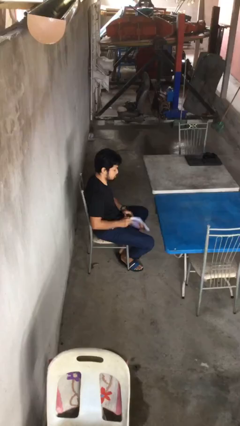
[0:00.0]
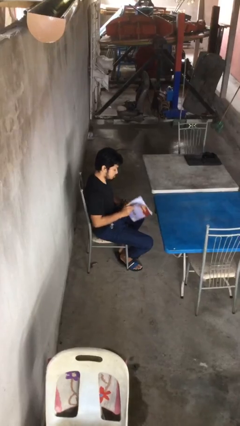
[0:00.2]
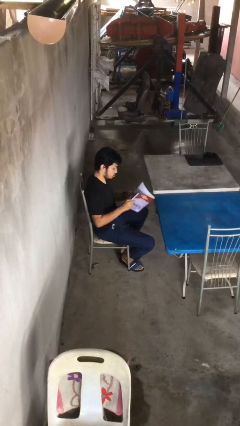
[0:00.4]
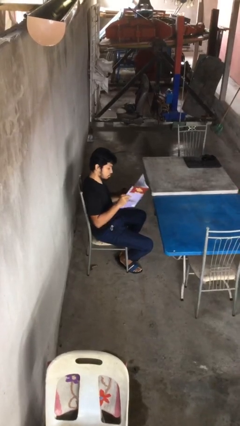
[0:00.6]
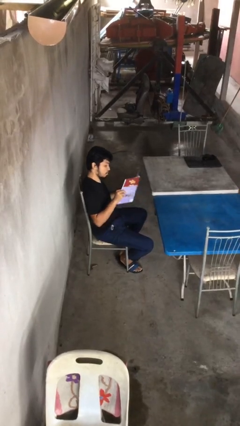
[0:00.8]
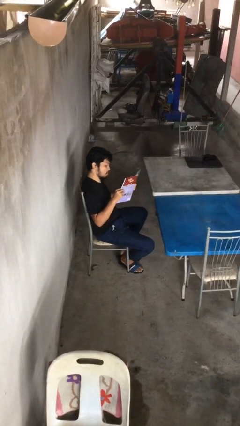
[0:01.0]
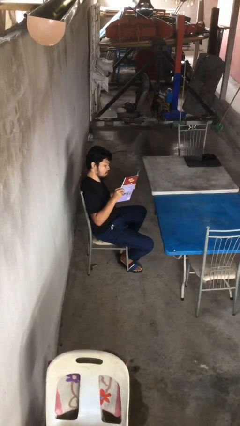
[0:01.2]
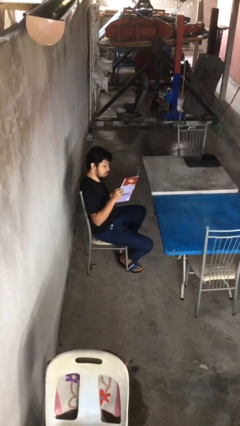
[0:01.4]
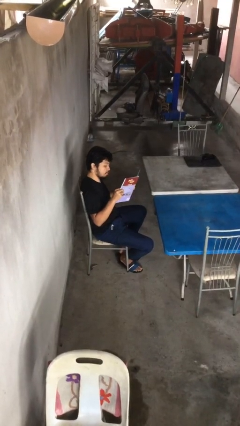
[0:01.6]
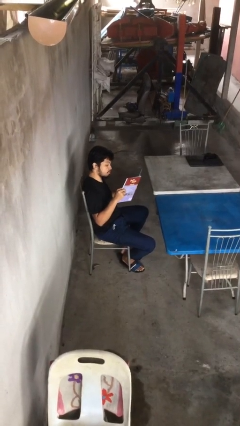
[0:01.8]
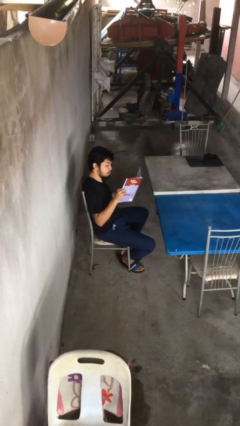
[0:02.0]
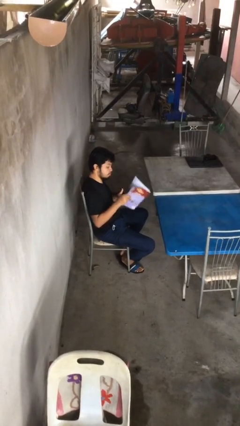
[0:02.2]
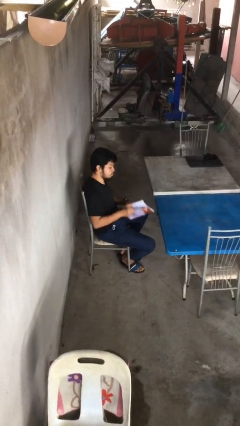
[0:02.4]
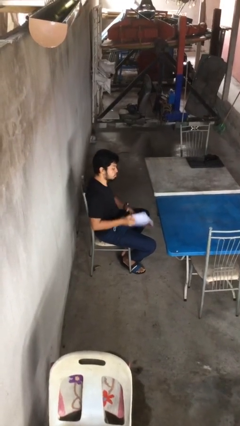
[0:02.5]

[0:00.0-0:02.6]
person reads magazine

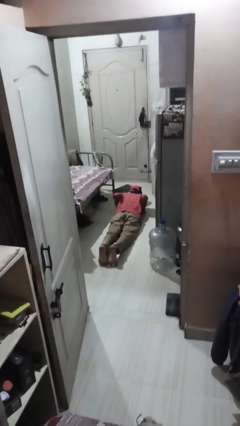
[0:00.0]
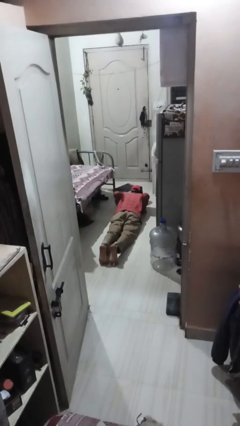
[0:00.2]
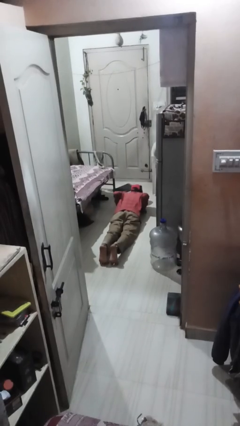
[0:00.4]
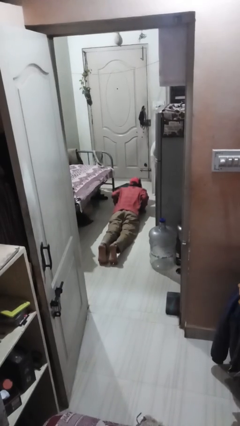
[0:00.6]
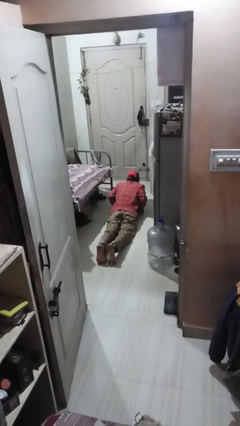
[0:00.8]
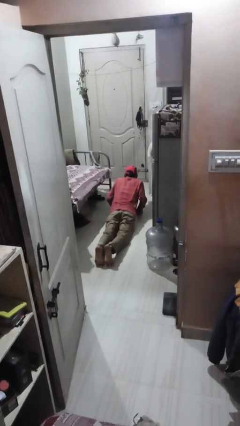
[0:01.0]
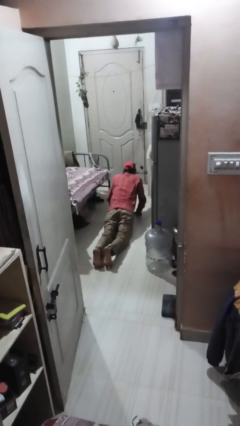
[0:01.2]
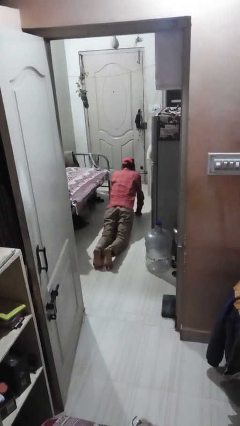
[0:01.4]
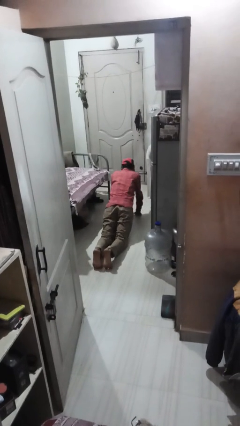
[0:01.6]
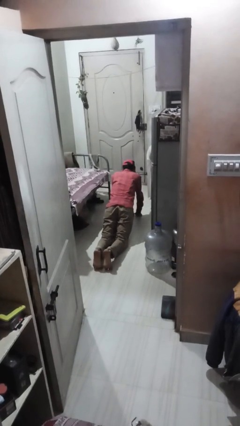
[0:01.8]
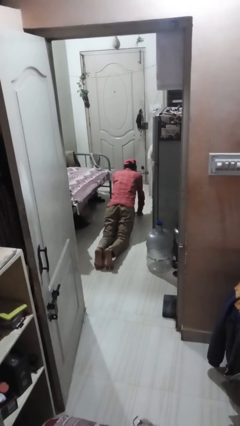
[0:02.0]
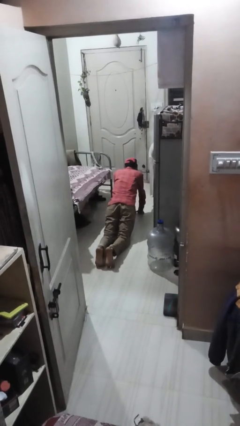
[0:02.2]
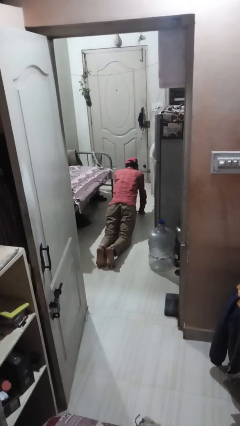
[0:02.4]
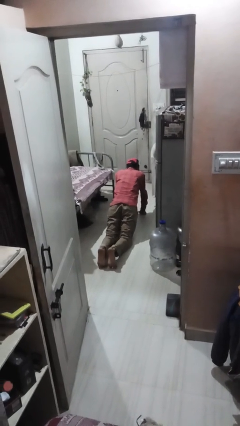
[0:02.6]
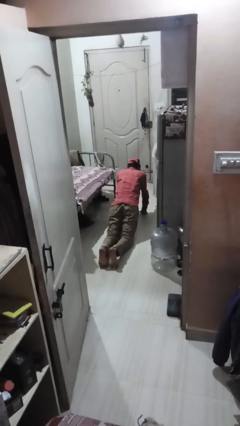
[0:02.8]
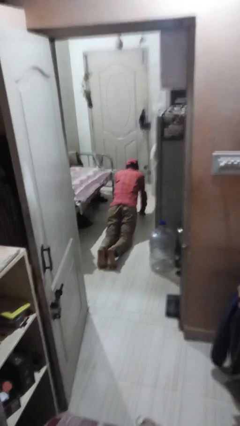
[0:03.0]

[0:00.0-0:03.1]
person exercises with pushup

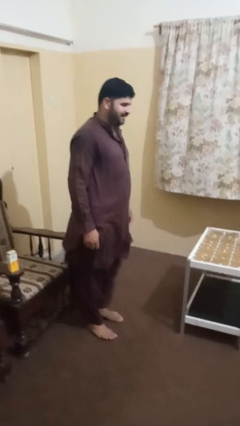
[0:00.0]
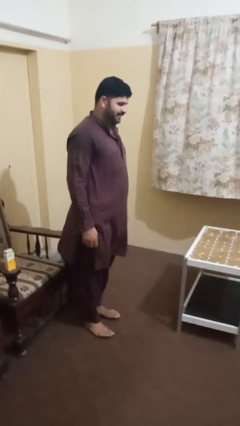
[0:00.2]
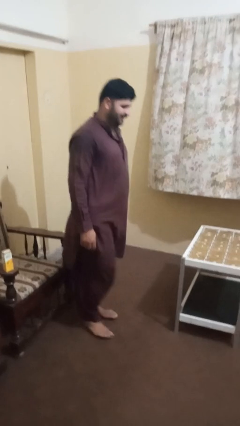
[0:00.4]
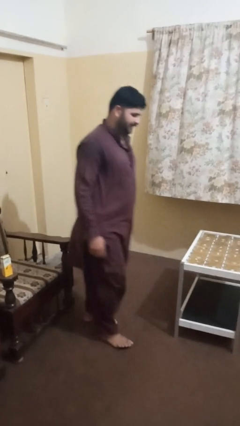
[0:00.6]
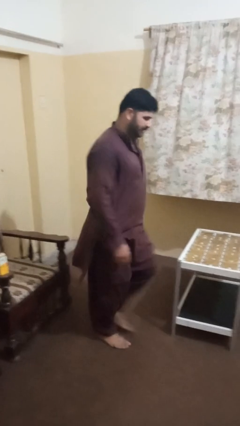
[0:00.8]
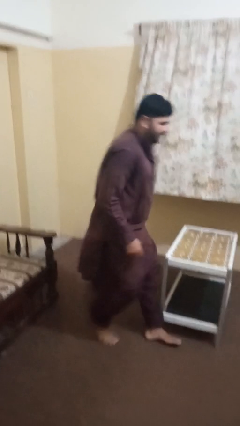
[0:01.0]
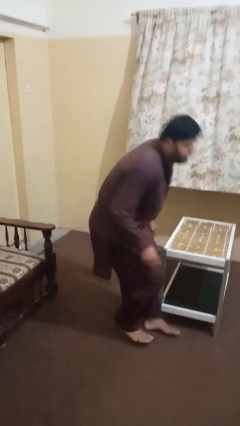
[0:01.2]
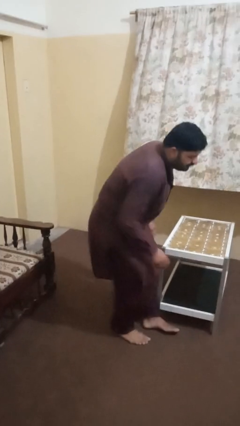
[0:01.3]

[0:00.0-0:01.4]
person bumps into table

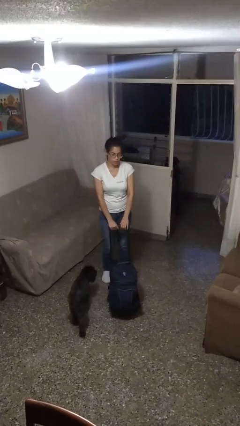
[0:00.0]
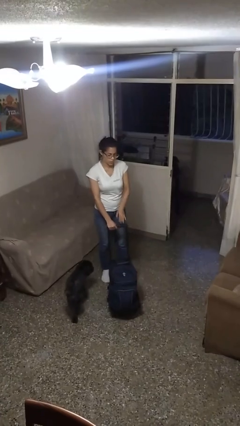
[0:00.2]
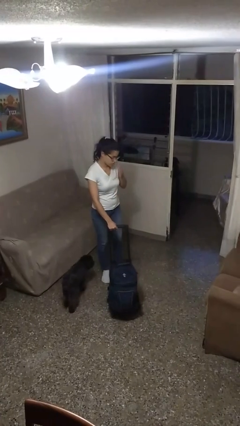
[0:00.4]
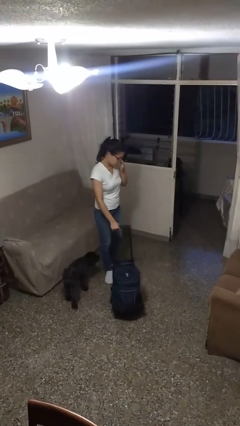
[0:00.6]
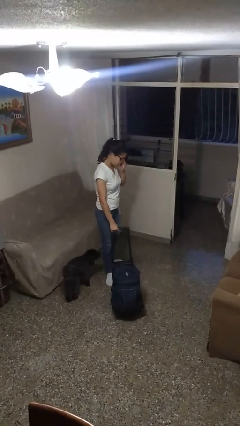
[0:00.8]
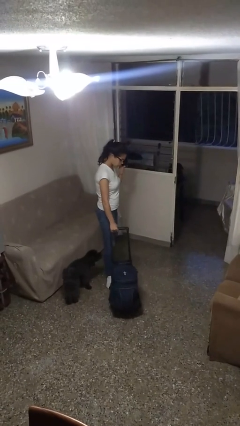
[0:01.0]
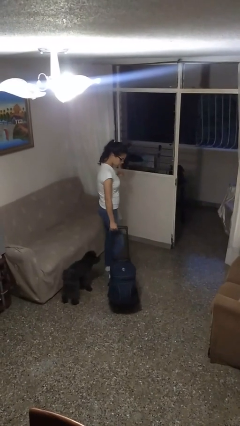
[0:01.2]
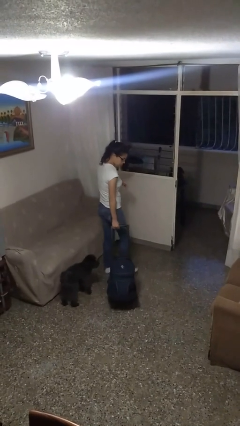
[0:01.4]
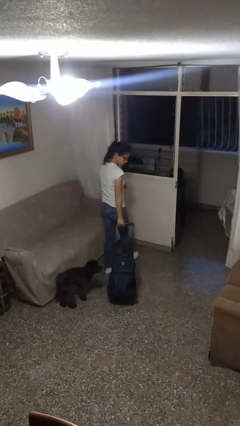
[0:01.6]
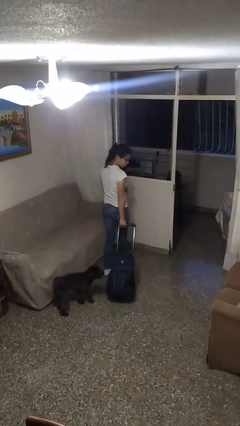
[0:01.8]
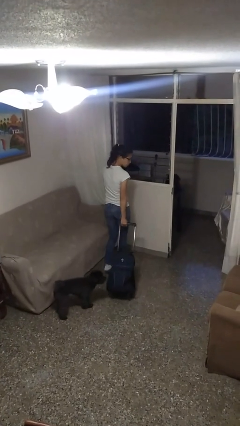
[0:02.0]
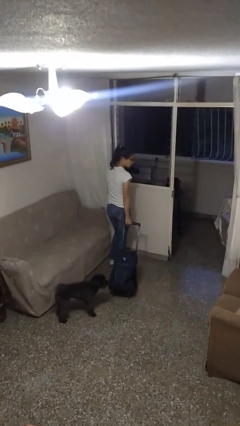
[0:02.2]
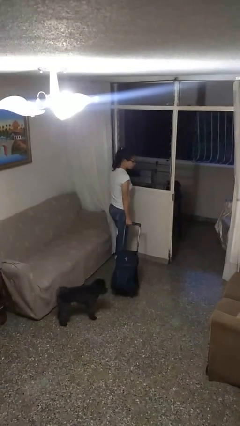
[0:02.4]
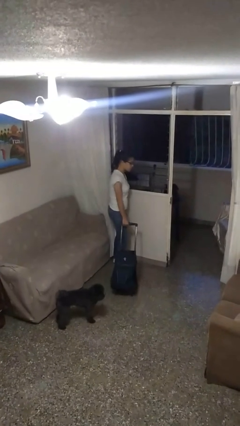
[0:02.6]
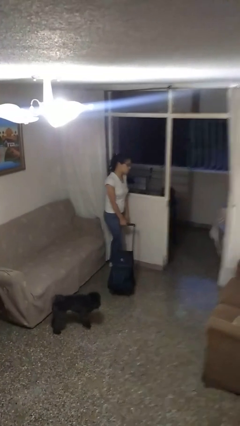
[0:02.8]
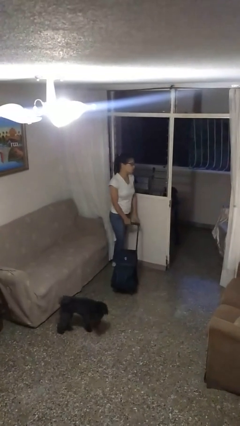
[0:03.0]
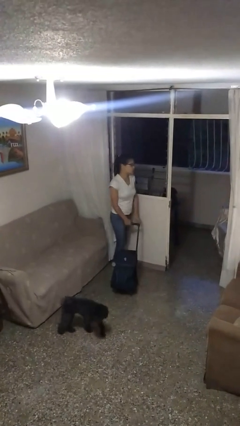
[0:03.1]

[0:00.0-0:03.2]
person pulls wheeled cart

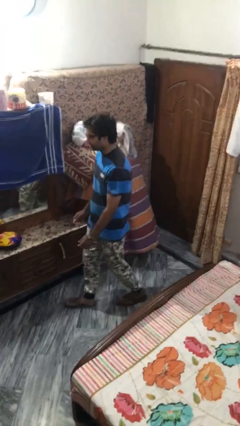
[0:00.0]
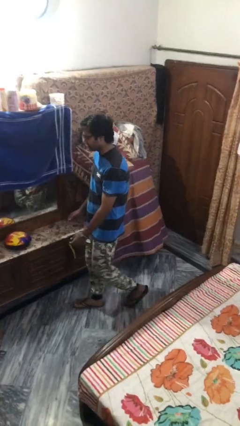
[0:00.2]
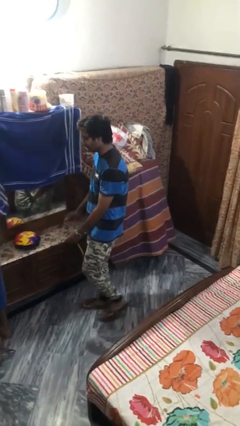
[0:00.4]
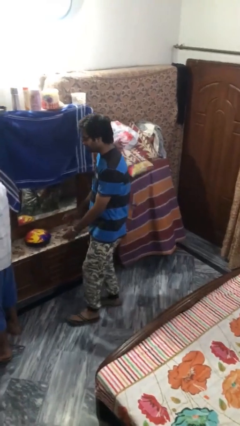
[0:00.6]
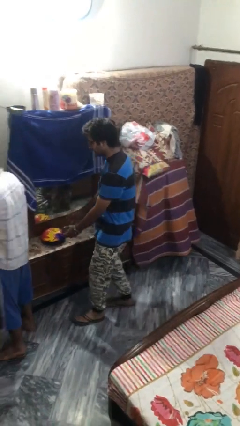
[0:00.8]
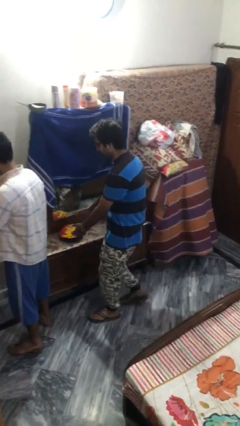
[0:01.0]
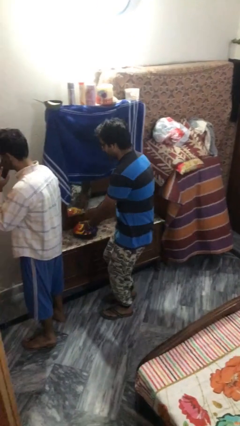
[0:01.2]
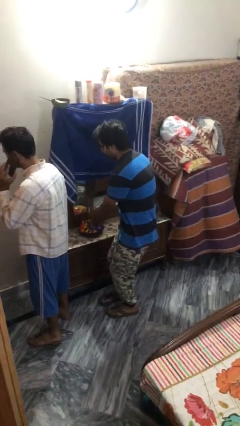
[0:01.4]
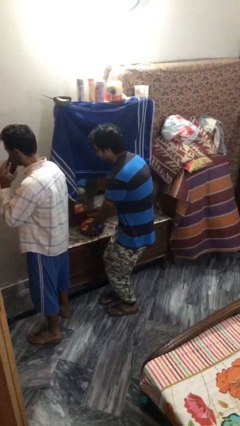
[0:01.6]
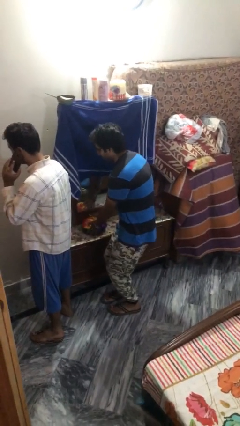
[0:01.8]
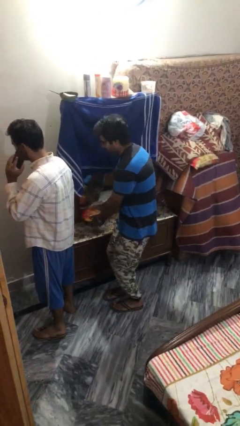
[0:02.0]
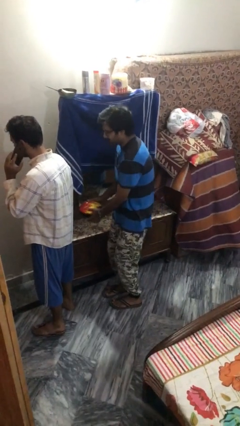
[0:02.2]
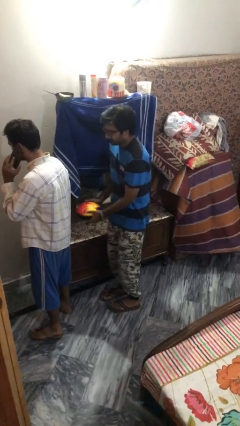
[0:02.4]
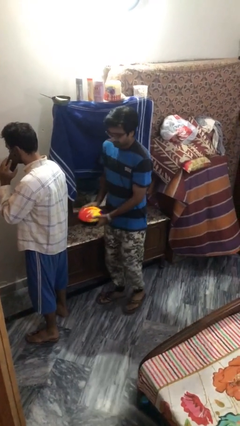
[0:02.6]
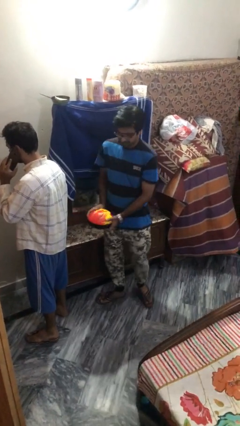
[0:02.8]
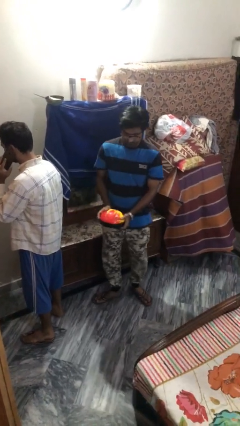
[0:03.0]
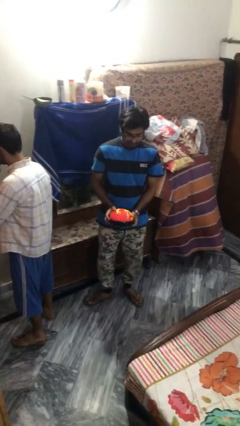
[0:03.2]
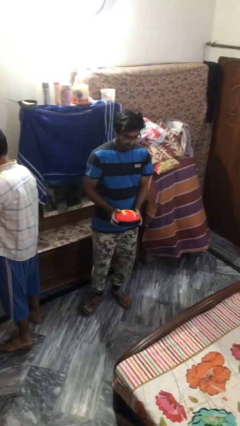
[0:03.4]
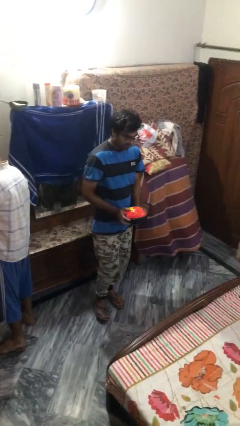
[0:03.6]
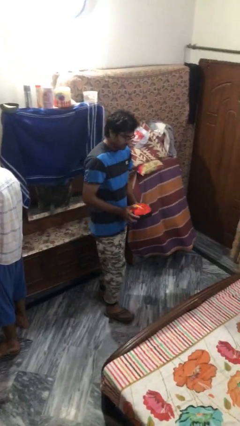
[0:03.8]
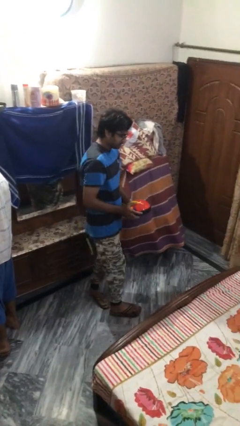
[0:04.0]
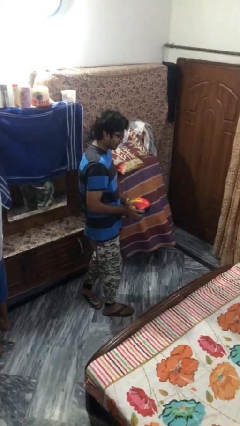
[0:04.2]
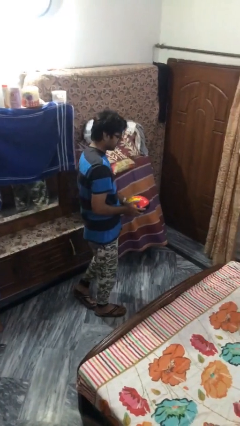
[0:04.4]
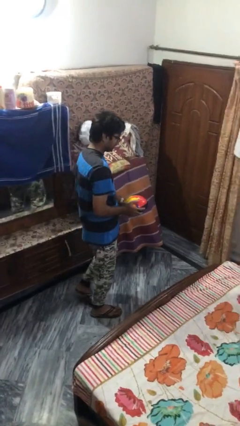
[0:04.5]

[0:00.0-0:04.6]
person steals object from person

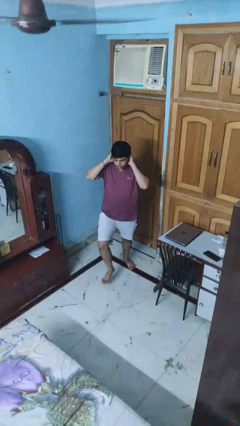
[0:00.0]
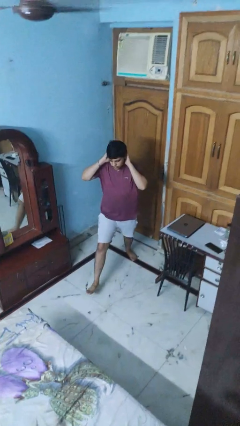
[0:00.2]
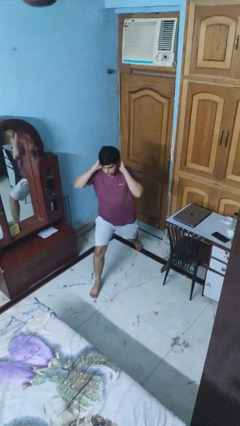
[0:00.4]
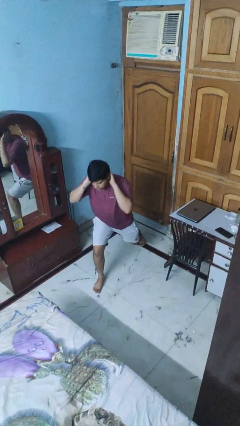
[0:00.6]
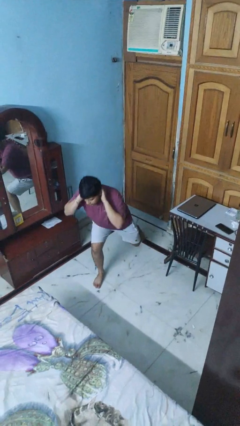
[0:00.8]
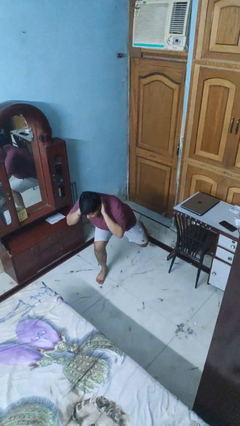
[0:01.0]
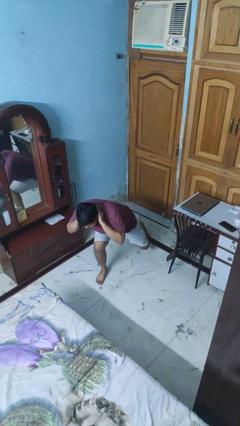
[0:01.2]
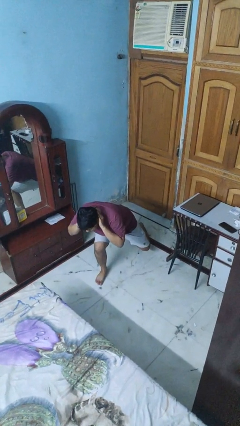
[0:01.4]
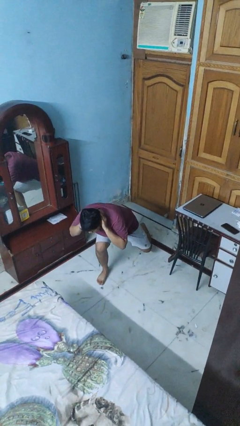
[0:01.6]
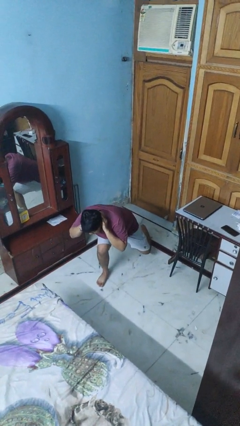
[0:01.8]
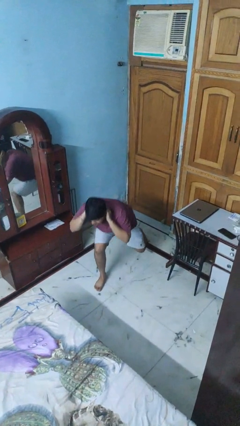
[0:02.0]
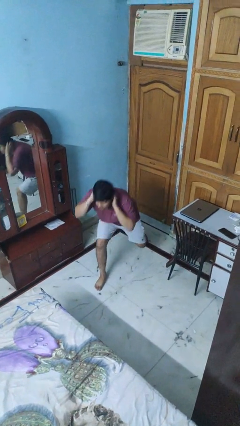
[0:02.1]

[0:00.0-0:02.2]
person exercises with lunges
